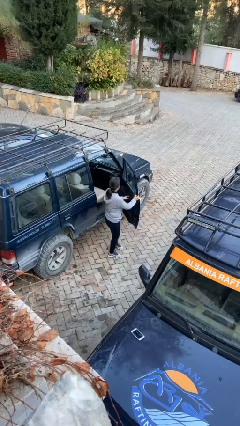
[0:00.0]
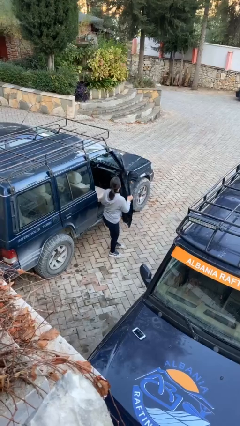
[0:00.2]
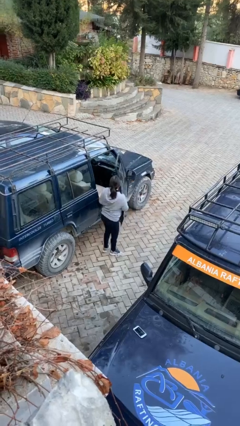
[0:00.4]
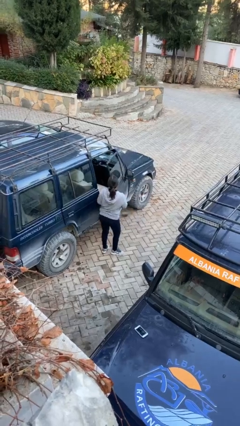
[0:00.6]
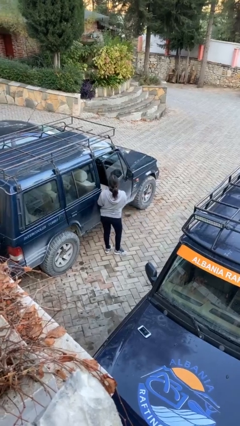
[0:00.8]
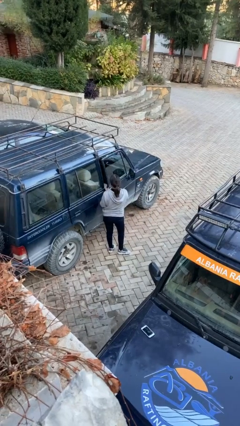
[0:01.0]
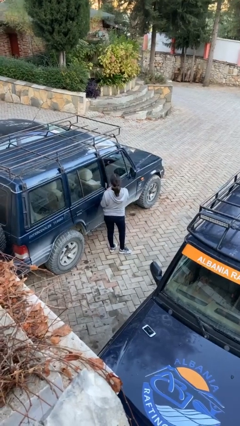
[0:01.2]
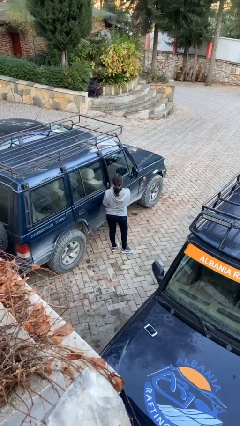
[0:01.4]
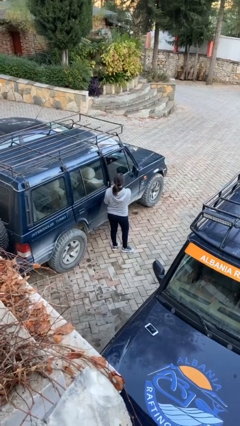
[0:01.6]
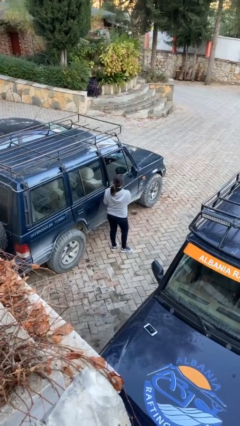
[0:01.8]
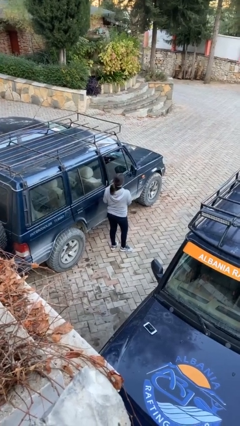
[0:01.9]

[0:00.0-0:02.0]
person closes car door

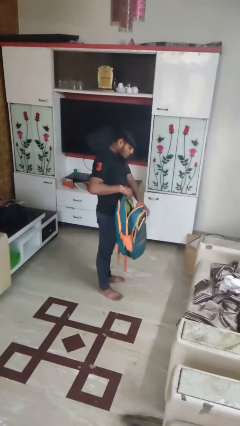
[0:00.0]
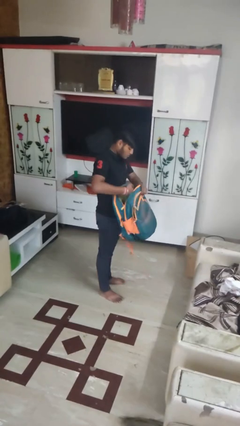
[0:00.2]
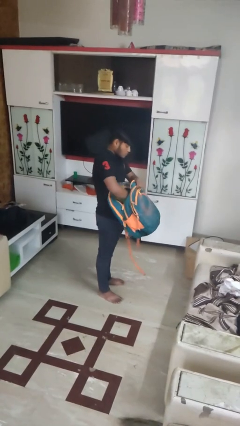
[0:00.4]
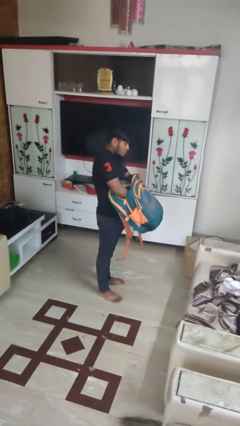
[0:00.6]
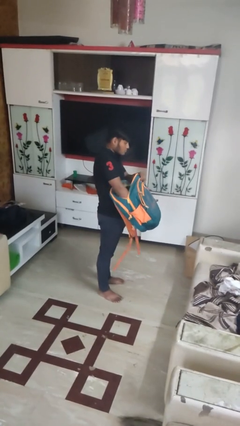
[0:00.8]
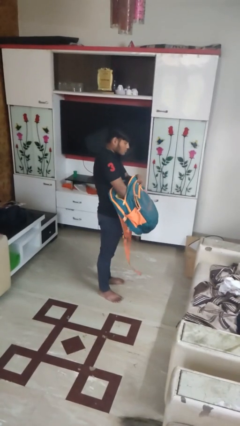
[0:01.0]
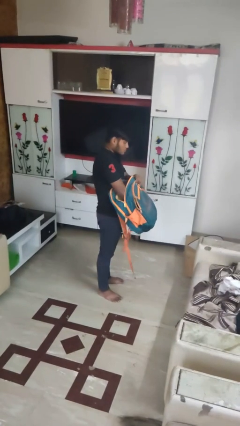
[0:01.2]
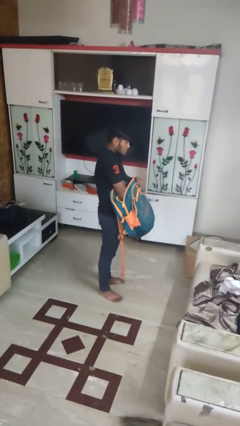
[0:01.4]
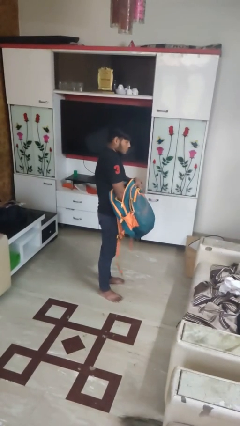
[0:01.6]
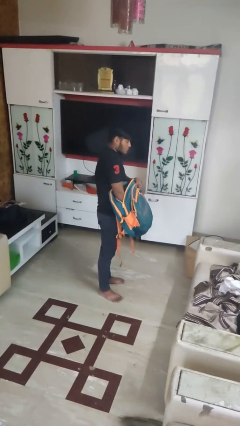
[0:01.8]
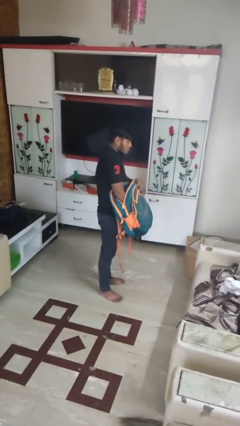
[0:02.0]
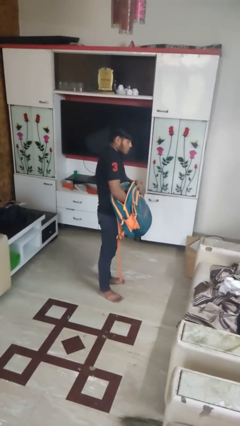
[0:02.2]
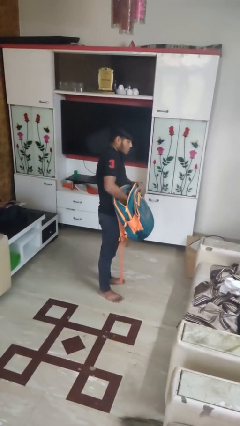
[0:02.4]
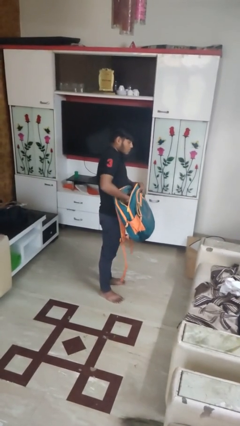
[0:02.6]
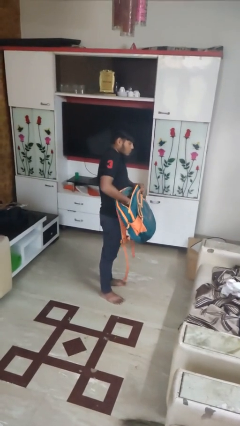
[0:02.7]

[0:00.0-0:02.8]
person searches in backpack

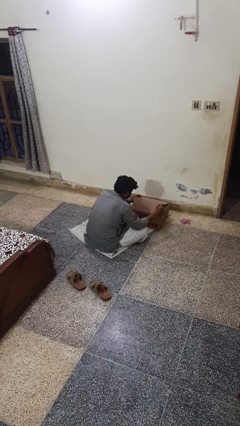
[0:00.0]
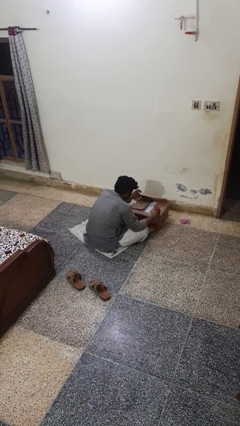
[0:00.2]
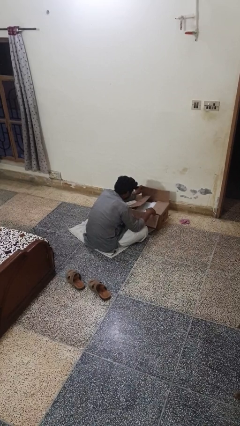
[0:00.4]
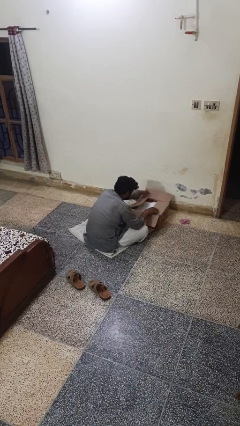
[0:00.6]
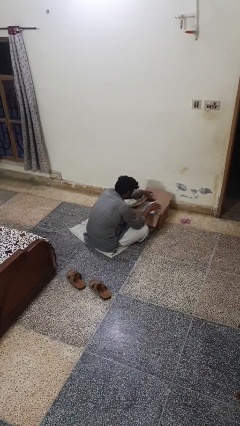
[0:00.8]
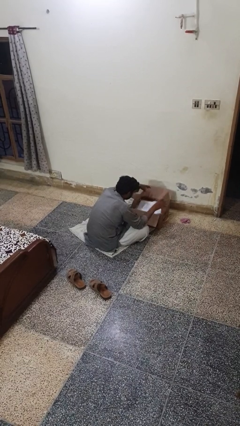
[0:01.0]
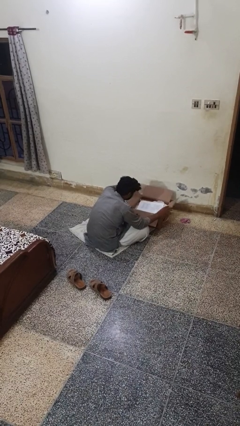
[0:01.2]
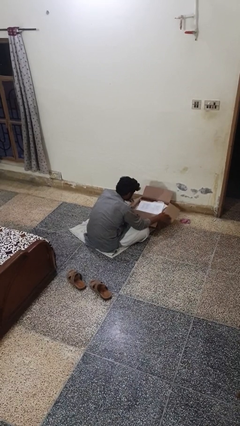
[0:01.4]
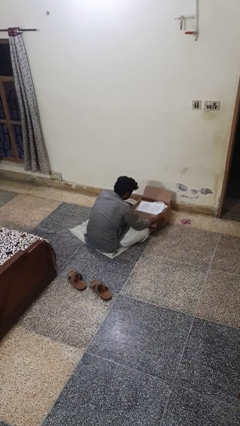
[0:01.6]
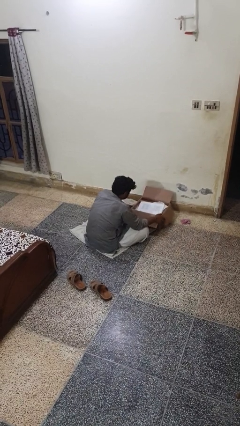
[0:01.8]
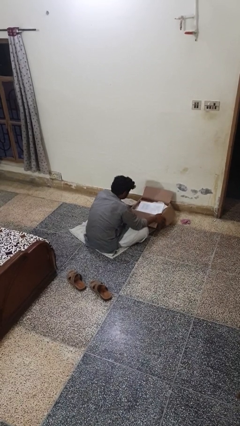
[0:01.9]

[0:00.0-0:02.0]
person opens box

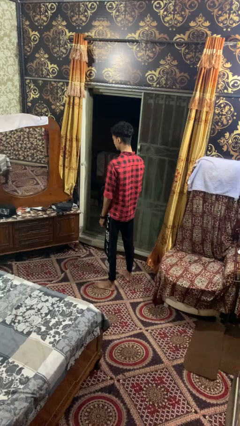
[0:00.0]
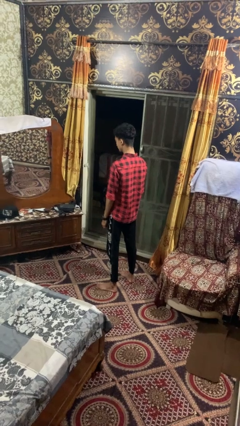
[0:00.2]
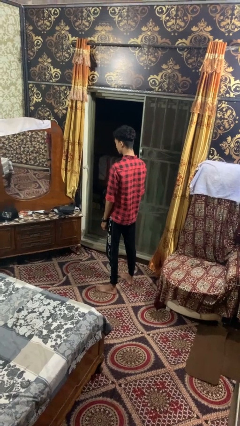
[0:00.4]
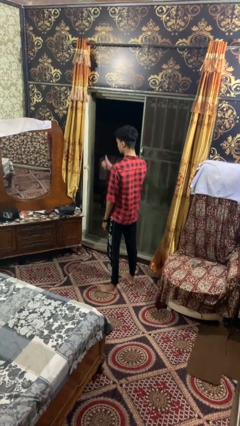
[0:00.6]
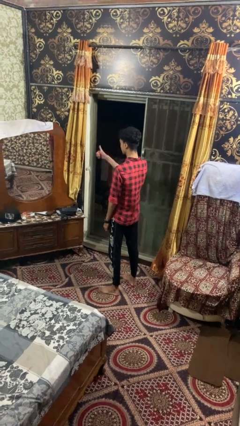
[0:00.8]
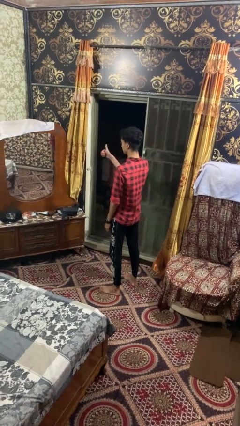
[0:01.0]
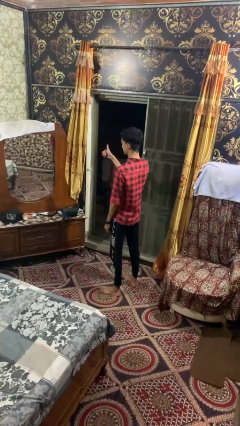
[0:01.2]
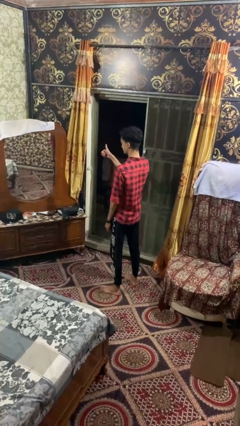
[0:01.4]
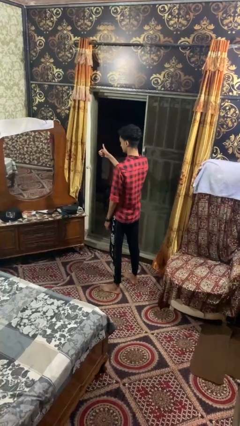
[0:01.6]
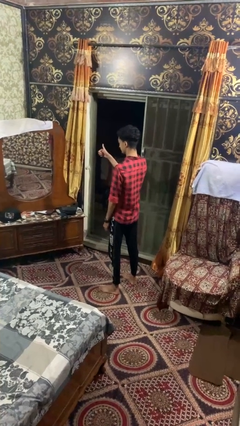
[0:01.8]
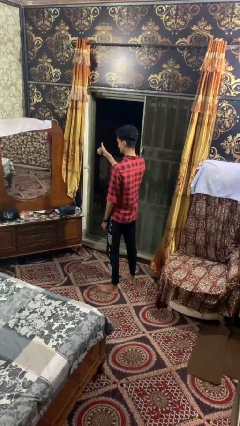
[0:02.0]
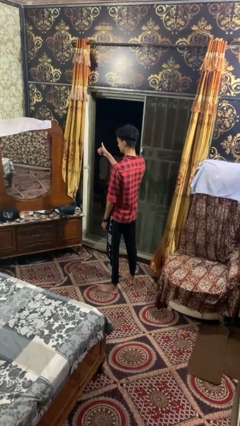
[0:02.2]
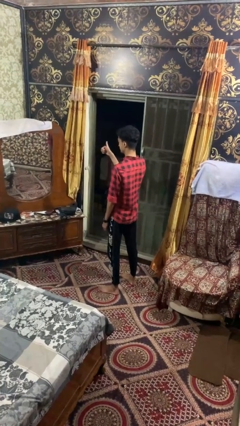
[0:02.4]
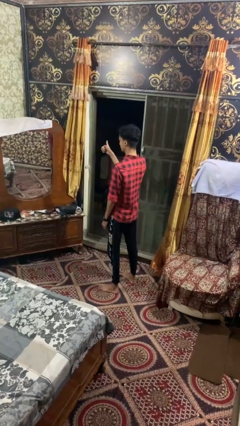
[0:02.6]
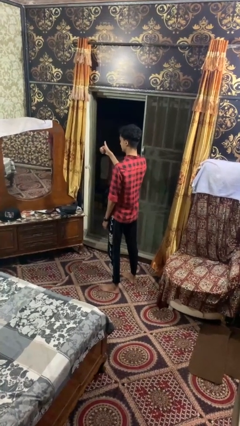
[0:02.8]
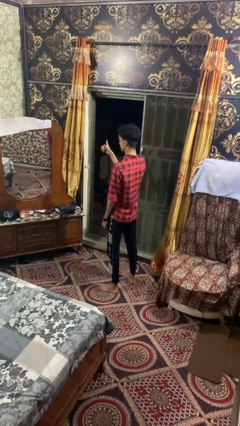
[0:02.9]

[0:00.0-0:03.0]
person gestures thumbs up

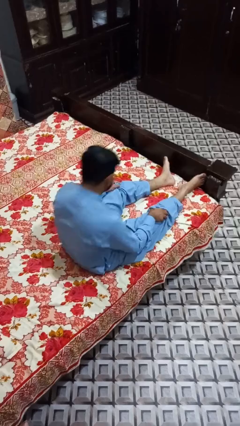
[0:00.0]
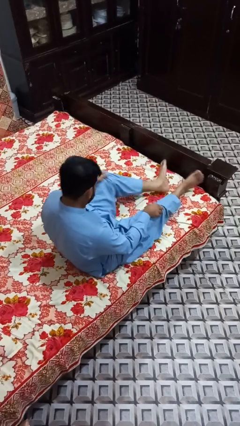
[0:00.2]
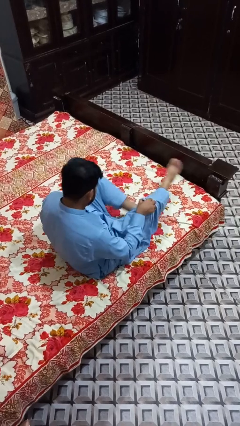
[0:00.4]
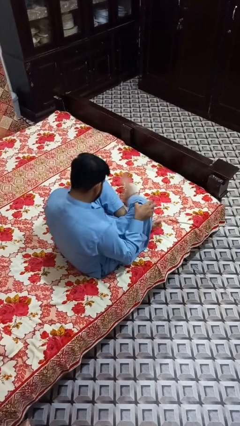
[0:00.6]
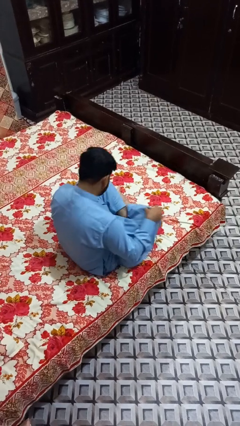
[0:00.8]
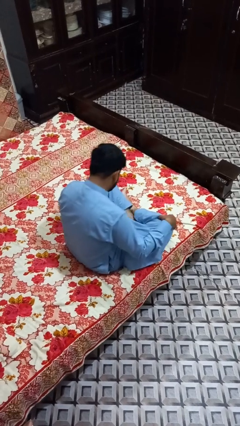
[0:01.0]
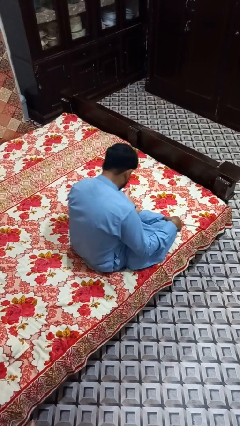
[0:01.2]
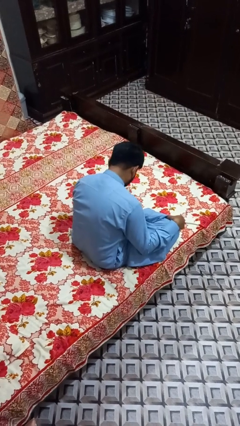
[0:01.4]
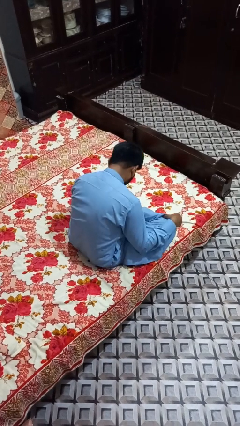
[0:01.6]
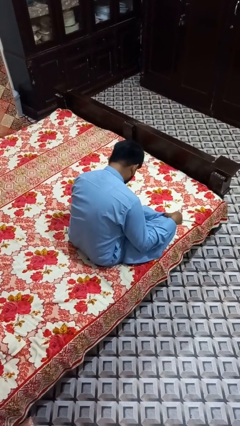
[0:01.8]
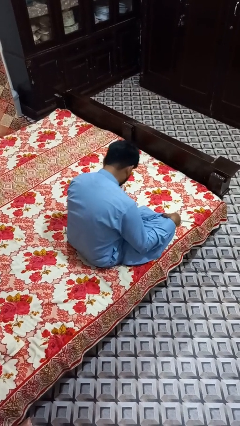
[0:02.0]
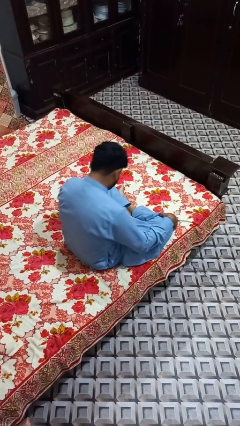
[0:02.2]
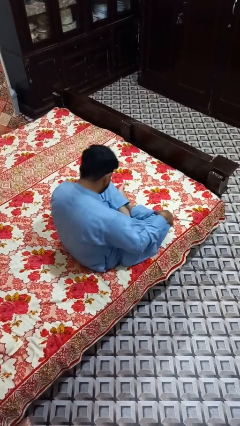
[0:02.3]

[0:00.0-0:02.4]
person crosses legs

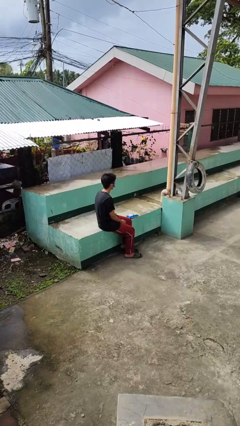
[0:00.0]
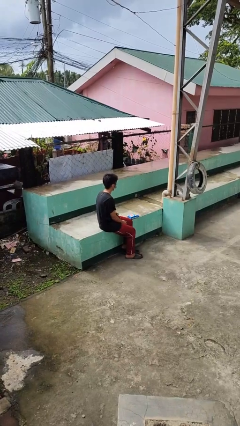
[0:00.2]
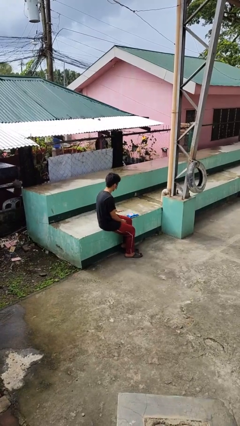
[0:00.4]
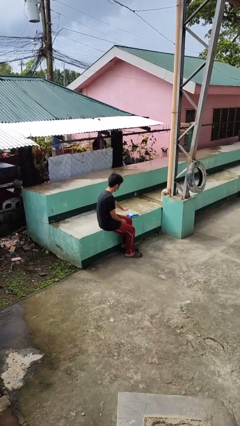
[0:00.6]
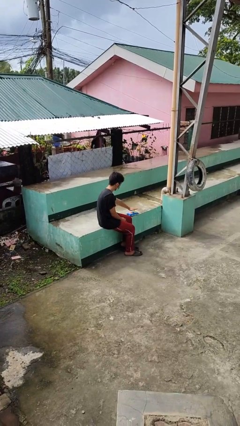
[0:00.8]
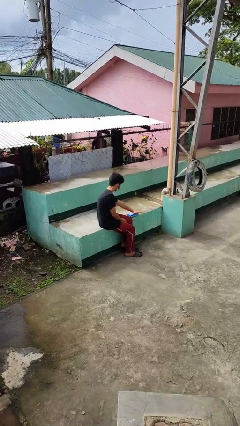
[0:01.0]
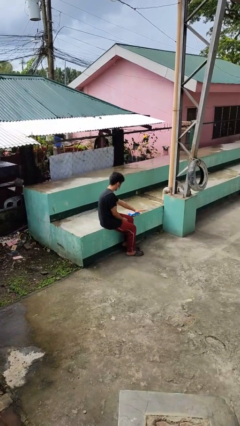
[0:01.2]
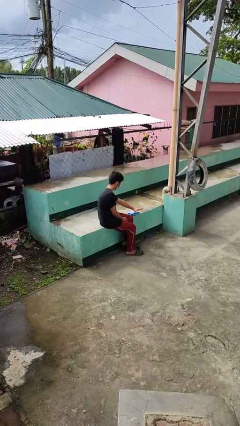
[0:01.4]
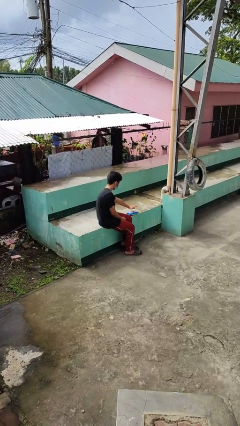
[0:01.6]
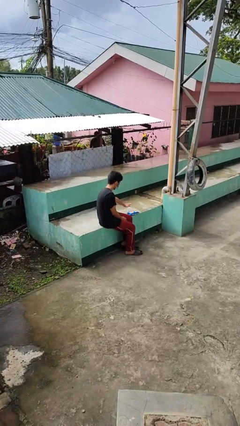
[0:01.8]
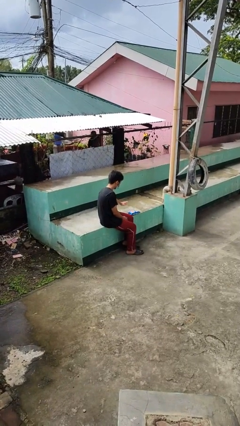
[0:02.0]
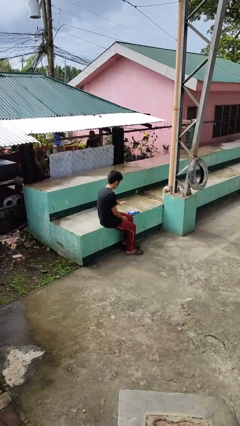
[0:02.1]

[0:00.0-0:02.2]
person waves hand over object

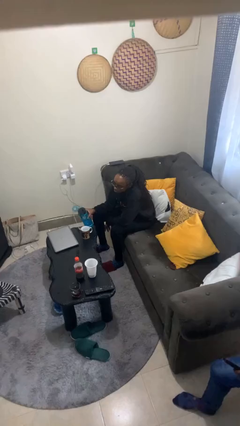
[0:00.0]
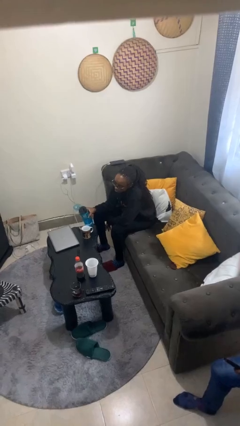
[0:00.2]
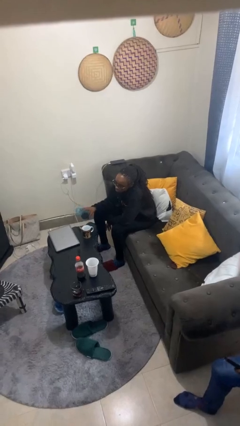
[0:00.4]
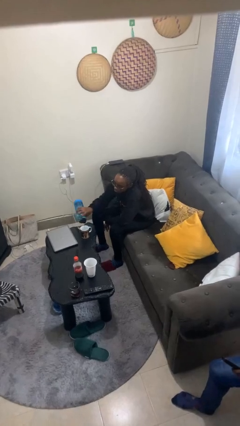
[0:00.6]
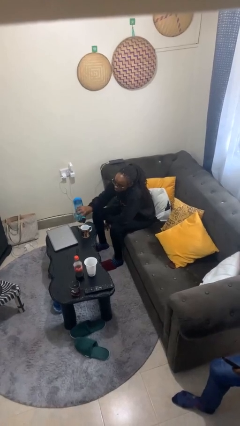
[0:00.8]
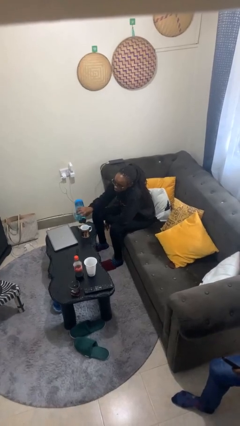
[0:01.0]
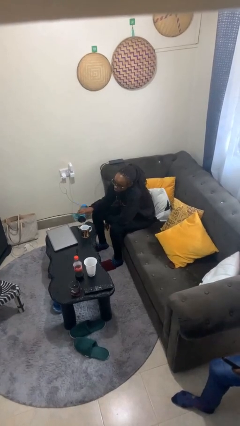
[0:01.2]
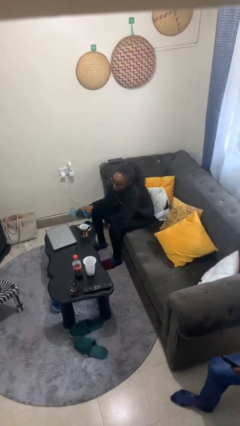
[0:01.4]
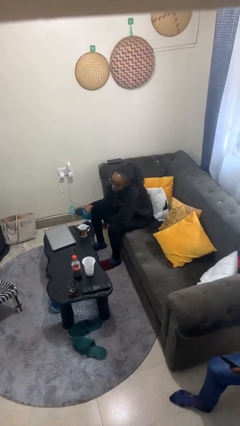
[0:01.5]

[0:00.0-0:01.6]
person pours liquid into cup

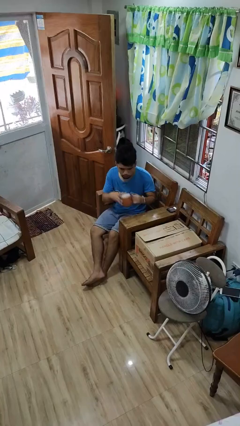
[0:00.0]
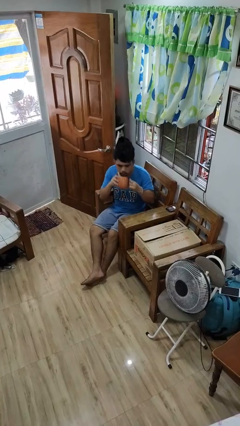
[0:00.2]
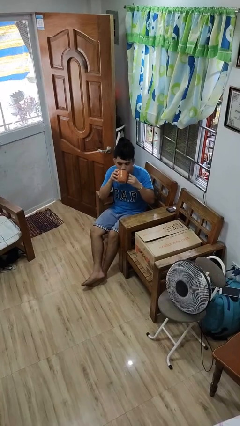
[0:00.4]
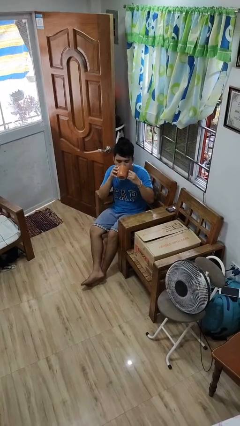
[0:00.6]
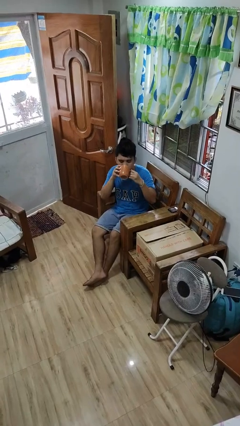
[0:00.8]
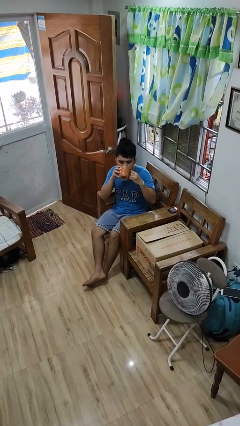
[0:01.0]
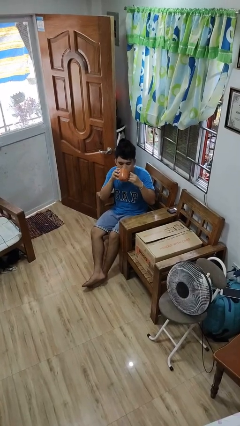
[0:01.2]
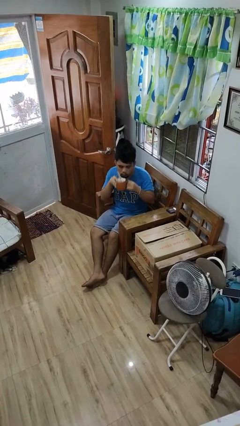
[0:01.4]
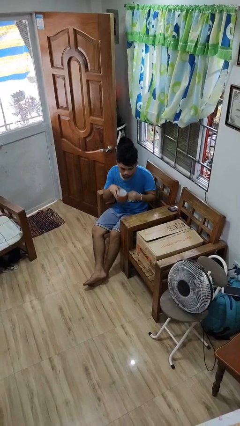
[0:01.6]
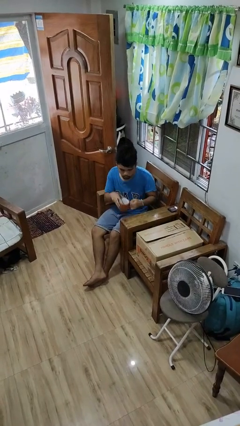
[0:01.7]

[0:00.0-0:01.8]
person drinks from mug
